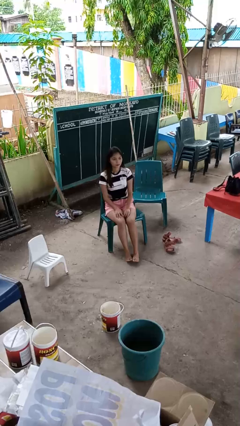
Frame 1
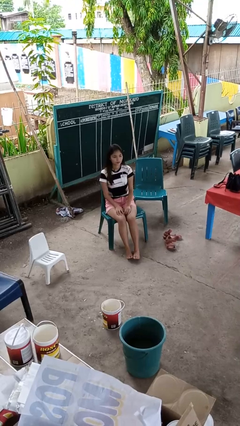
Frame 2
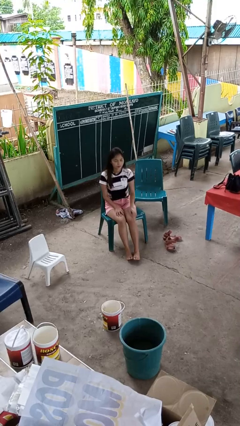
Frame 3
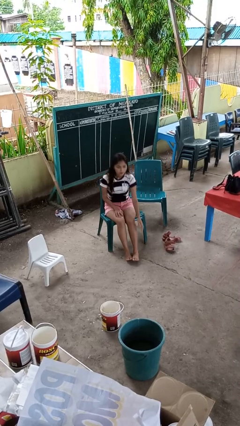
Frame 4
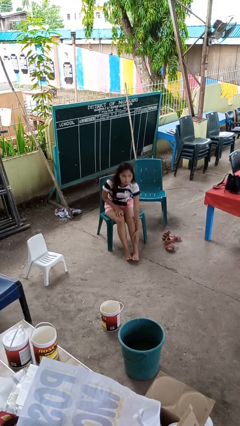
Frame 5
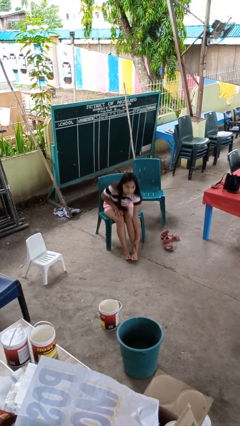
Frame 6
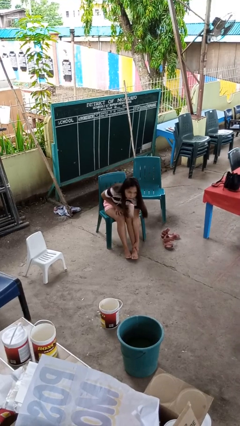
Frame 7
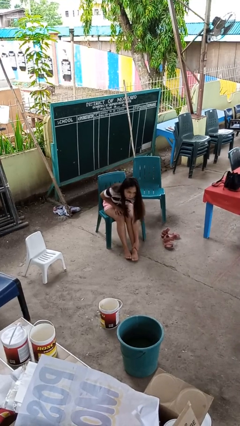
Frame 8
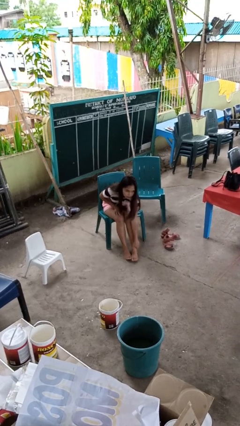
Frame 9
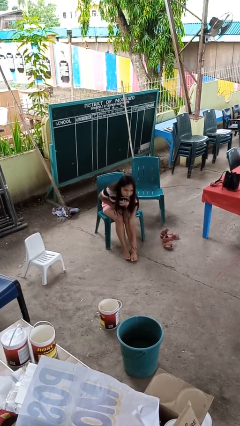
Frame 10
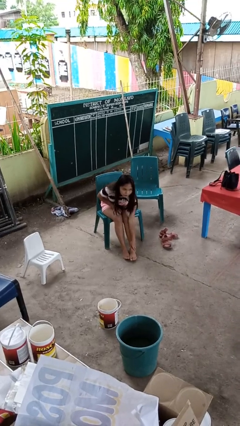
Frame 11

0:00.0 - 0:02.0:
person rubs foot

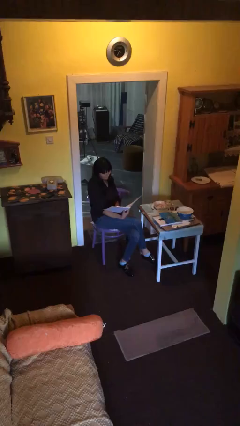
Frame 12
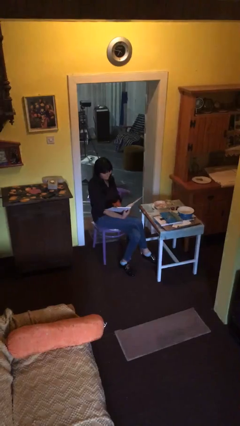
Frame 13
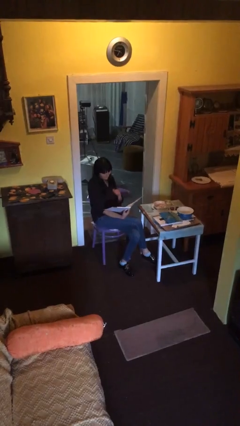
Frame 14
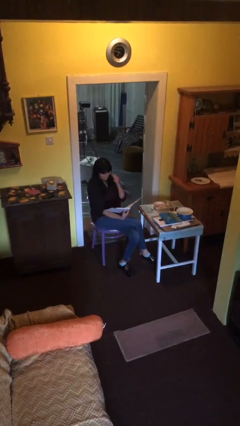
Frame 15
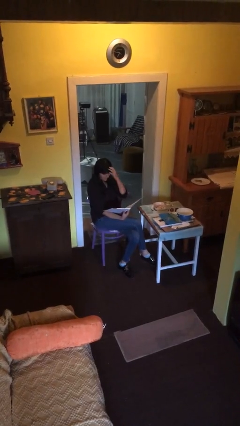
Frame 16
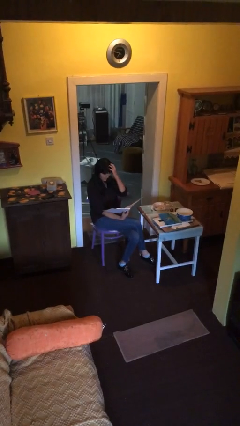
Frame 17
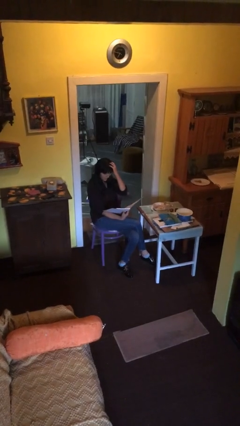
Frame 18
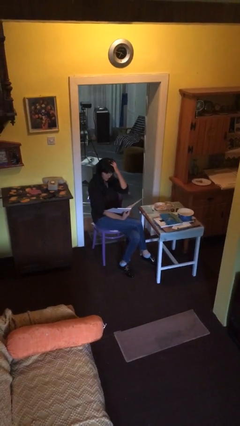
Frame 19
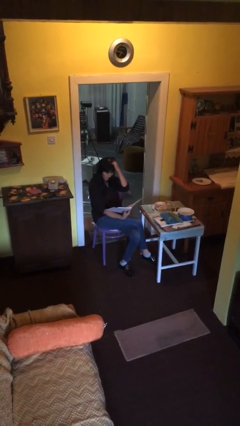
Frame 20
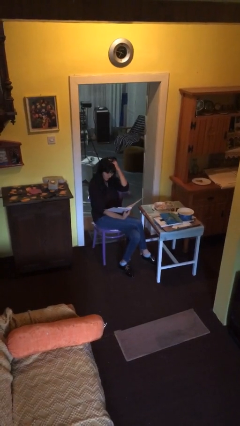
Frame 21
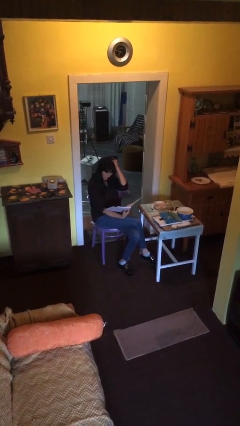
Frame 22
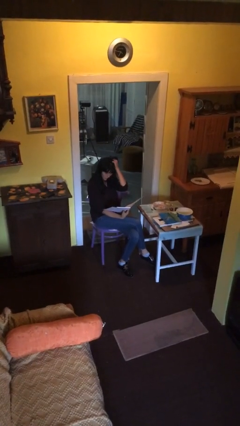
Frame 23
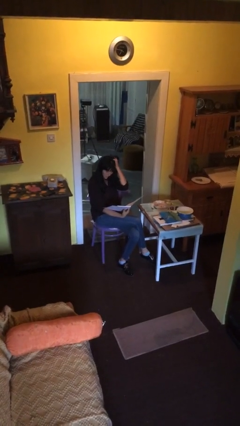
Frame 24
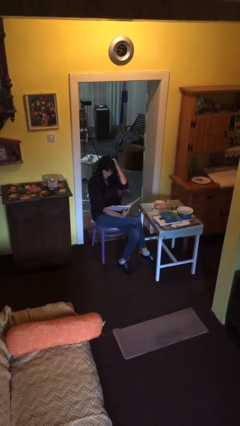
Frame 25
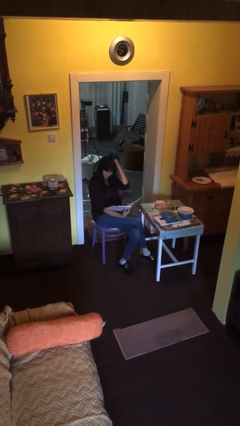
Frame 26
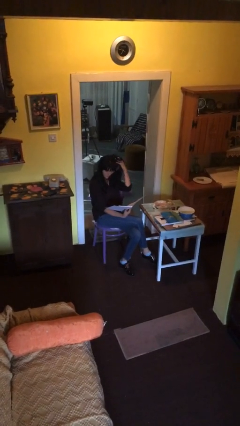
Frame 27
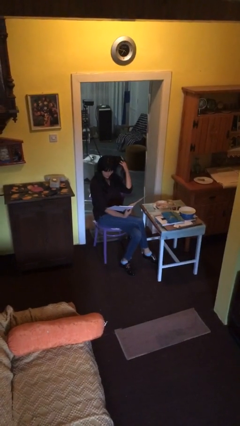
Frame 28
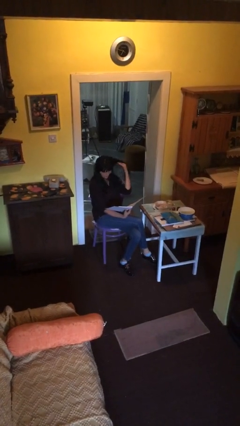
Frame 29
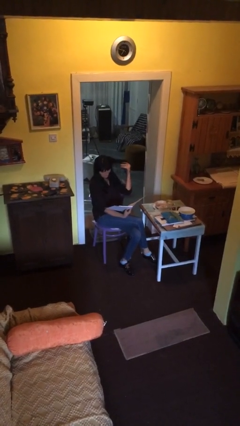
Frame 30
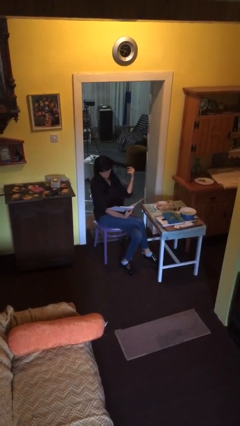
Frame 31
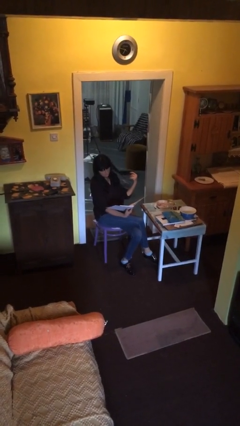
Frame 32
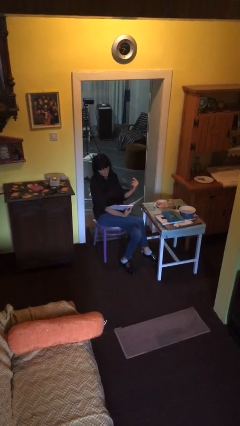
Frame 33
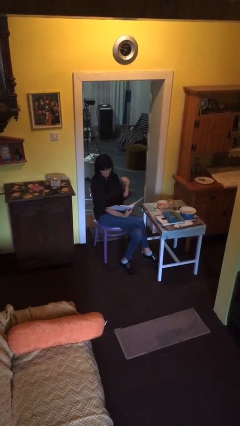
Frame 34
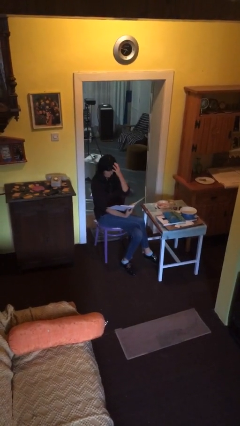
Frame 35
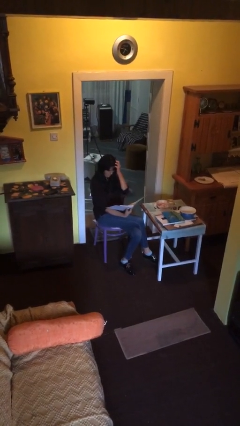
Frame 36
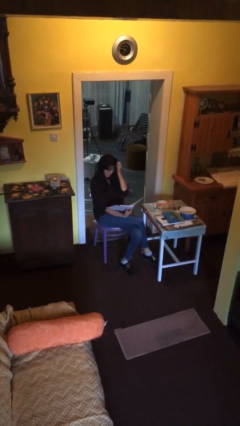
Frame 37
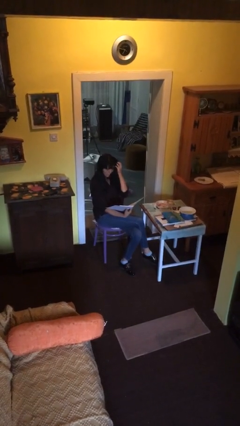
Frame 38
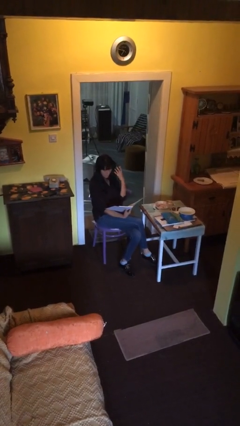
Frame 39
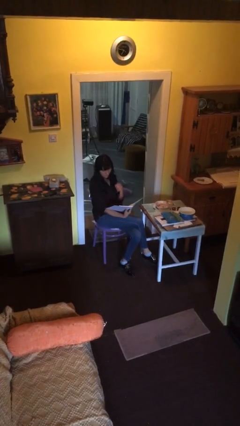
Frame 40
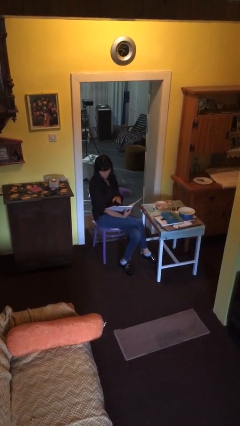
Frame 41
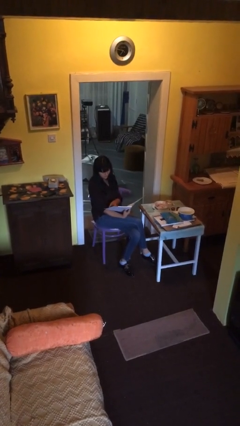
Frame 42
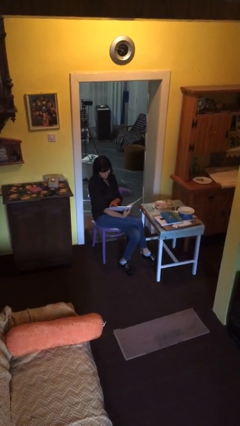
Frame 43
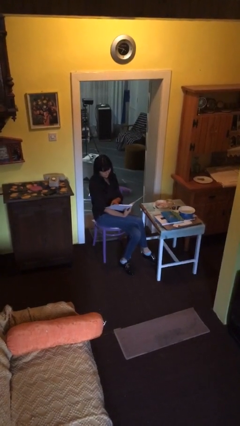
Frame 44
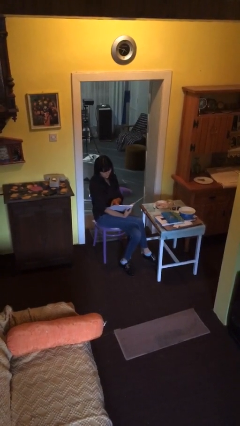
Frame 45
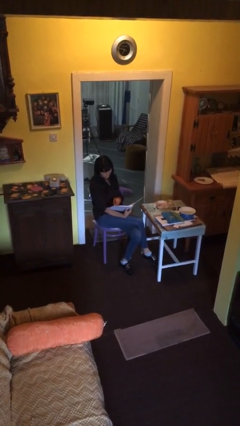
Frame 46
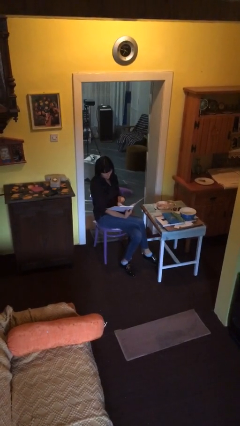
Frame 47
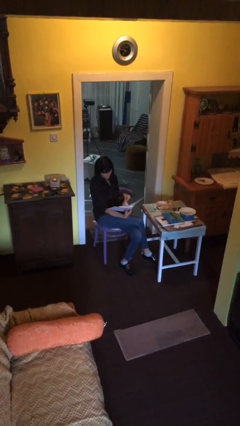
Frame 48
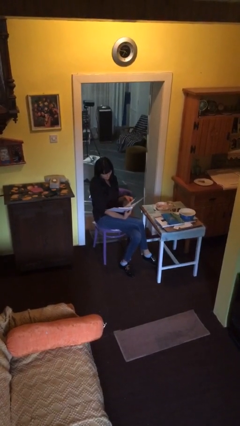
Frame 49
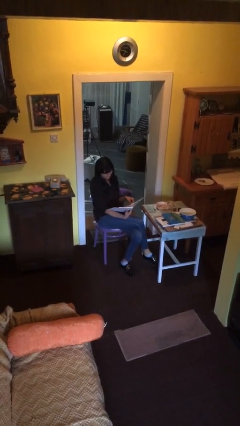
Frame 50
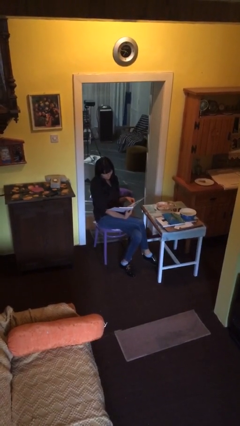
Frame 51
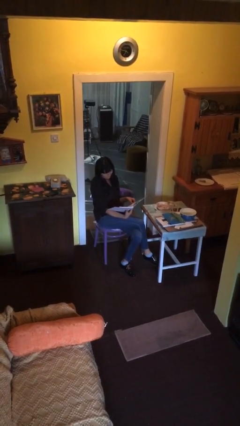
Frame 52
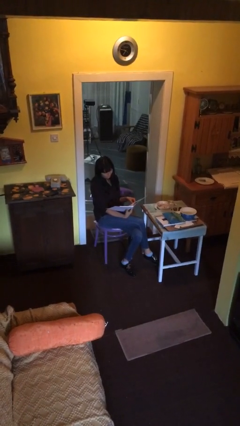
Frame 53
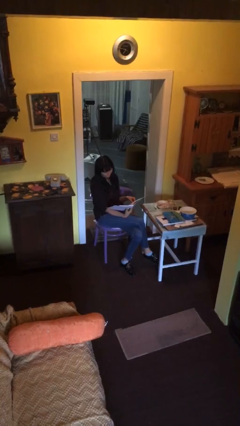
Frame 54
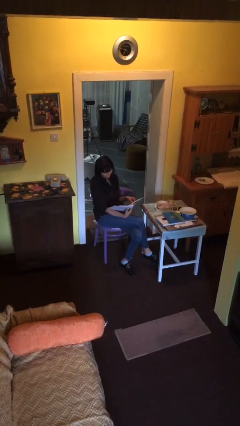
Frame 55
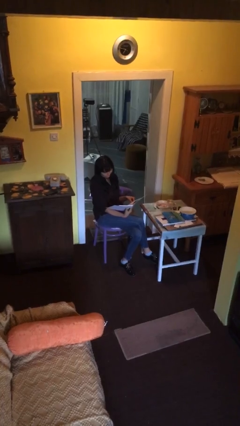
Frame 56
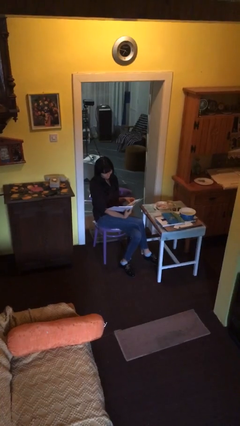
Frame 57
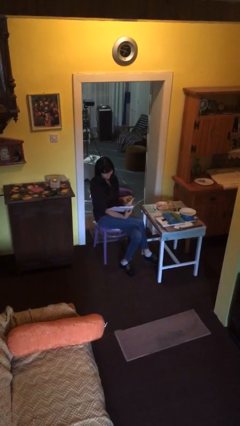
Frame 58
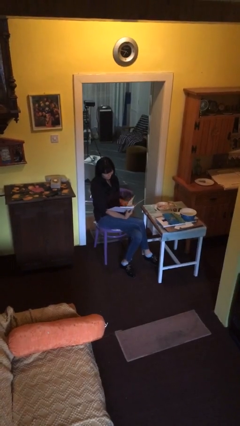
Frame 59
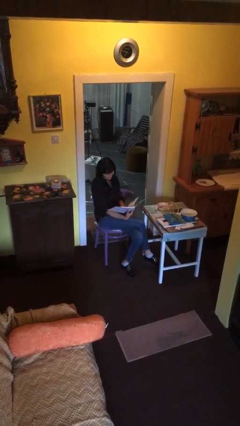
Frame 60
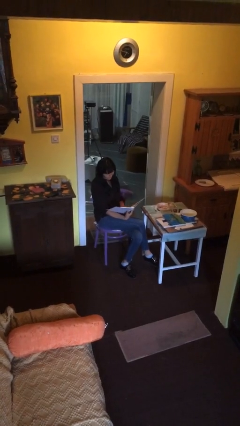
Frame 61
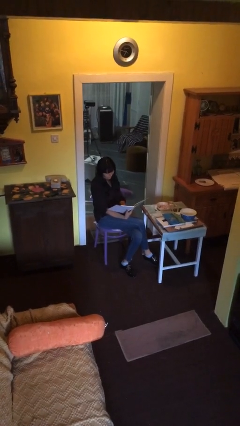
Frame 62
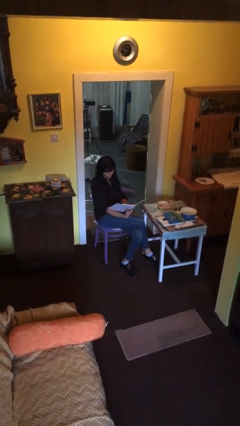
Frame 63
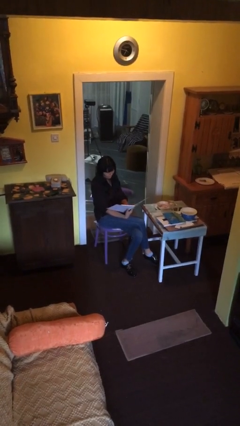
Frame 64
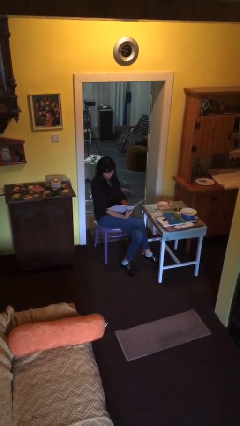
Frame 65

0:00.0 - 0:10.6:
person reads document

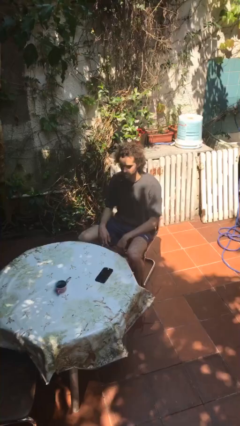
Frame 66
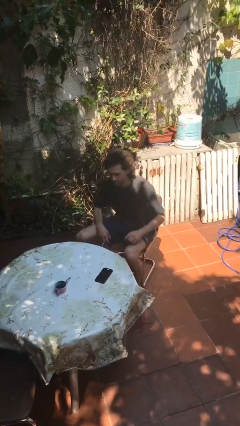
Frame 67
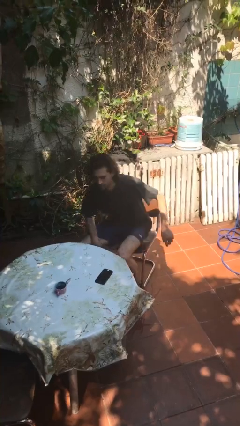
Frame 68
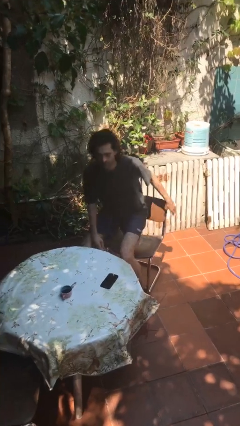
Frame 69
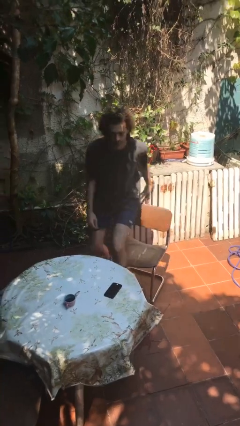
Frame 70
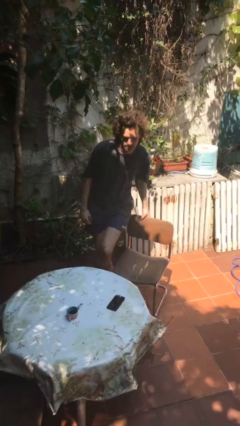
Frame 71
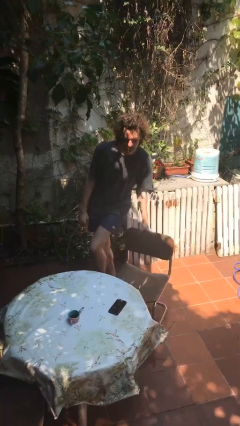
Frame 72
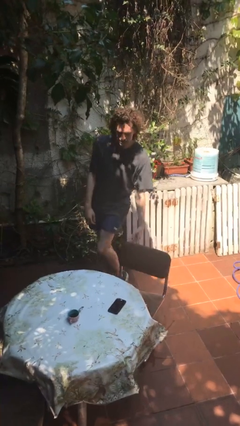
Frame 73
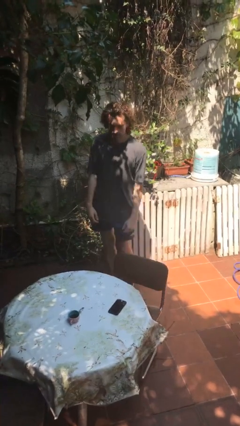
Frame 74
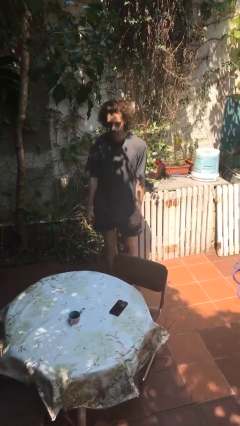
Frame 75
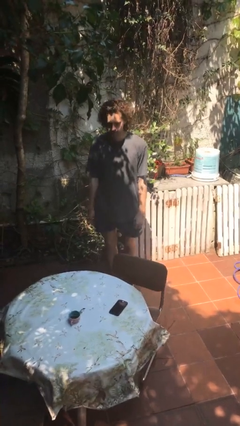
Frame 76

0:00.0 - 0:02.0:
person stands up

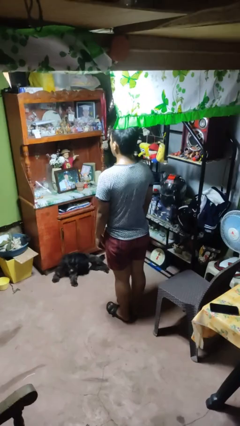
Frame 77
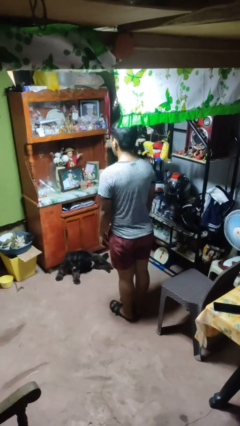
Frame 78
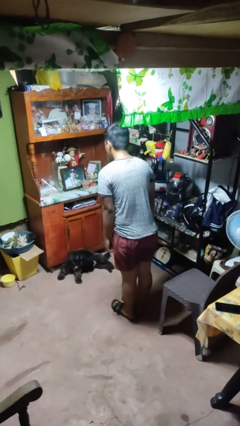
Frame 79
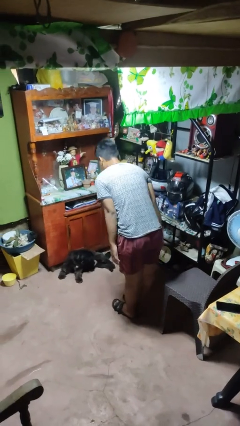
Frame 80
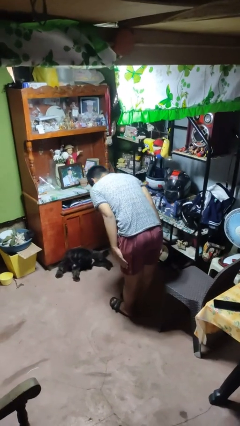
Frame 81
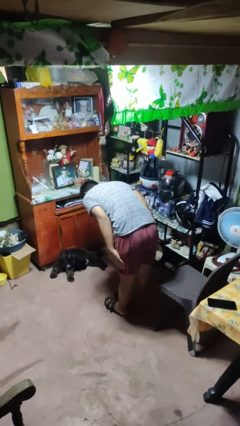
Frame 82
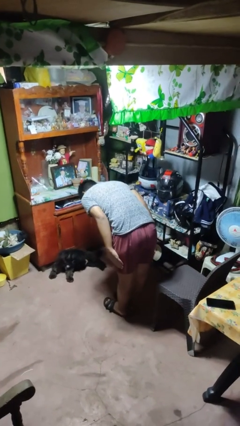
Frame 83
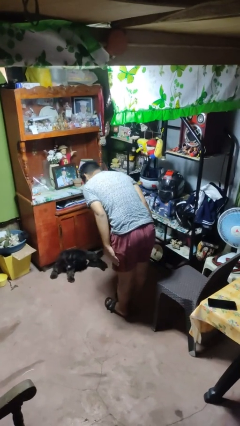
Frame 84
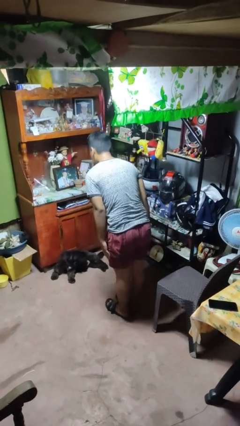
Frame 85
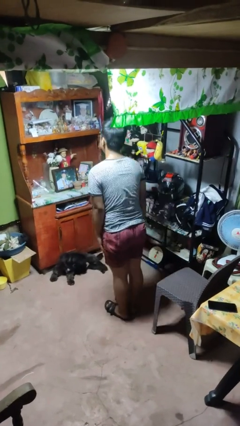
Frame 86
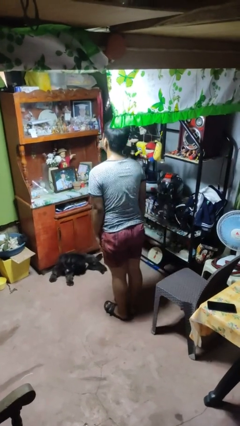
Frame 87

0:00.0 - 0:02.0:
person bows

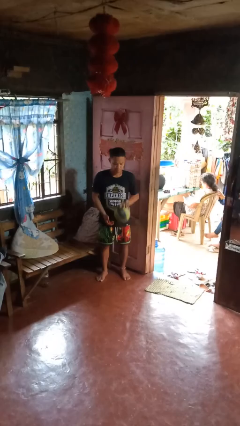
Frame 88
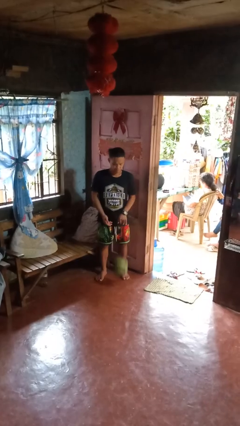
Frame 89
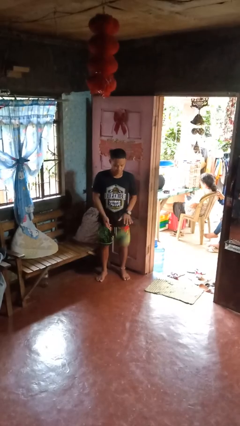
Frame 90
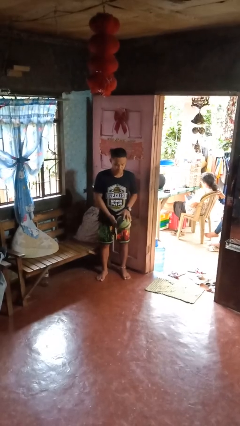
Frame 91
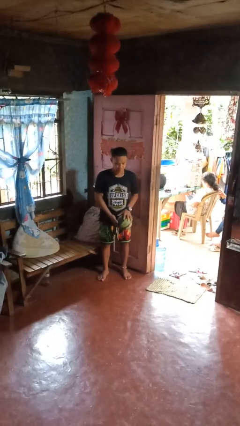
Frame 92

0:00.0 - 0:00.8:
person bounces ball on floor

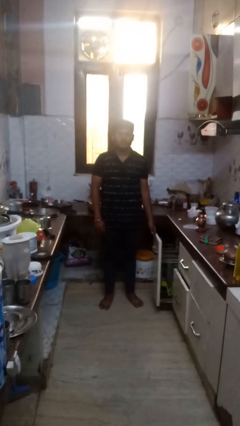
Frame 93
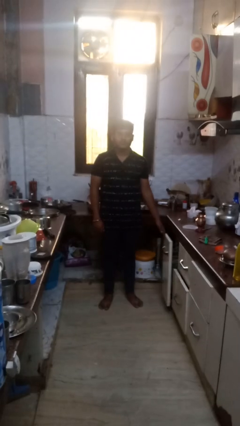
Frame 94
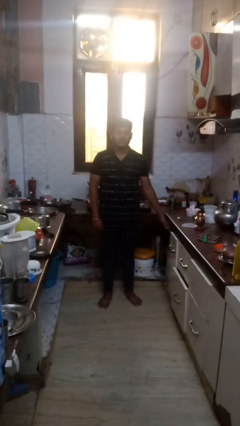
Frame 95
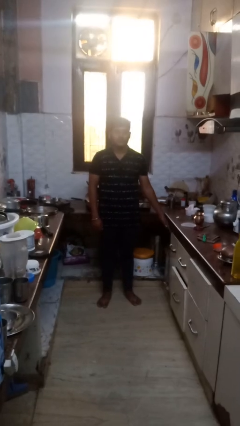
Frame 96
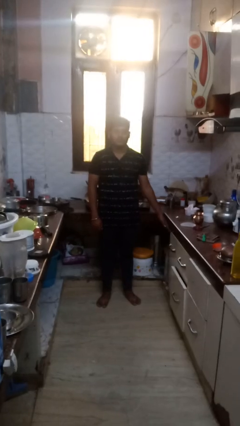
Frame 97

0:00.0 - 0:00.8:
person closes dishwasher
